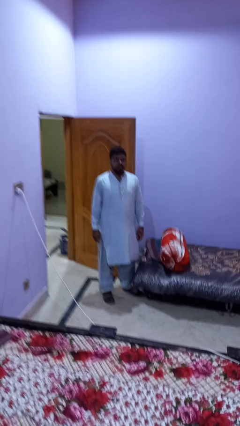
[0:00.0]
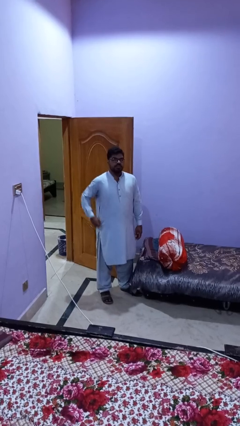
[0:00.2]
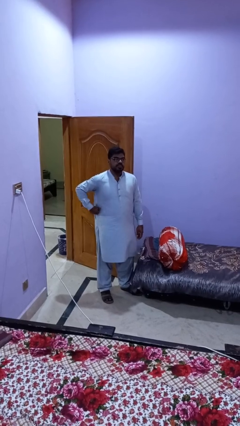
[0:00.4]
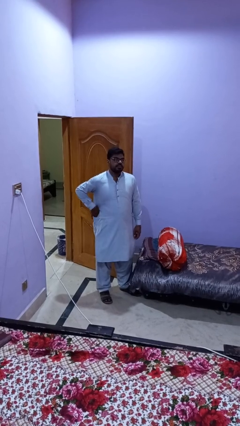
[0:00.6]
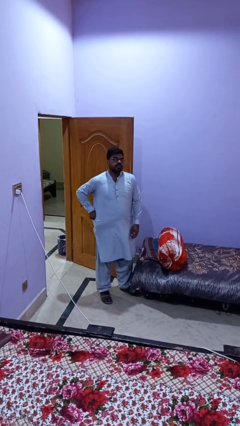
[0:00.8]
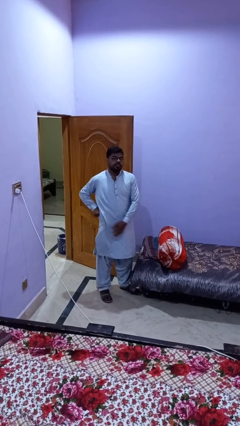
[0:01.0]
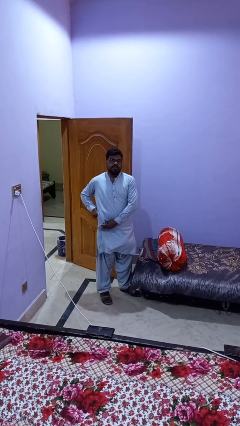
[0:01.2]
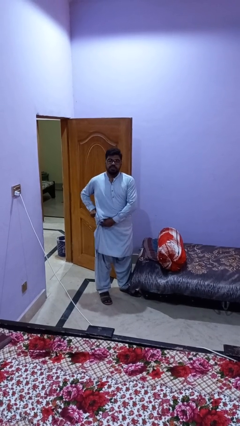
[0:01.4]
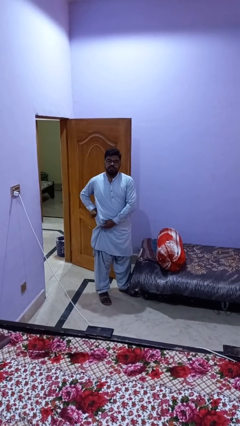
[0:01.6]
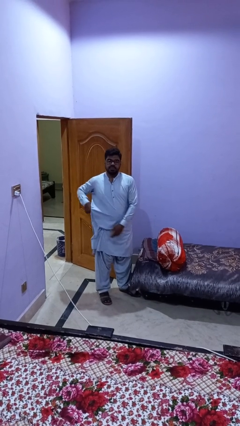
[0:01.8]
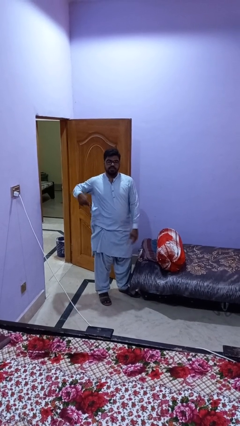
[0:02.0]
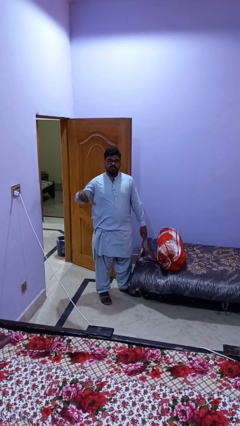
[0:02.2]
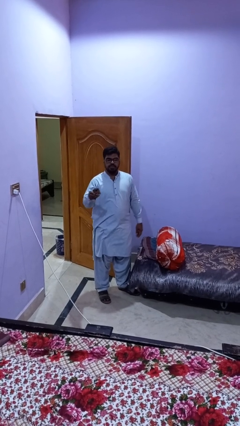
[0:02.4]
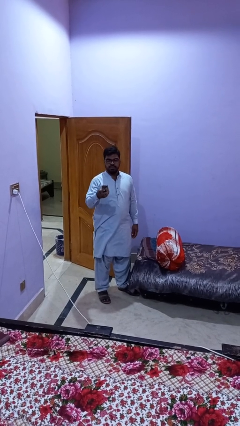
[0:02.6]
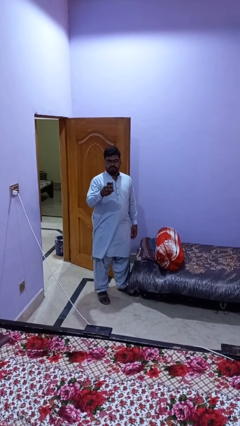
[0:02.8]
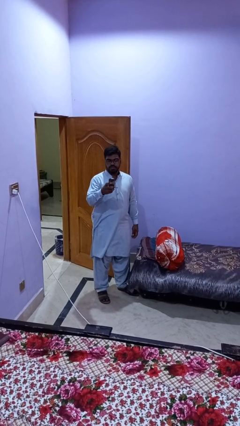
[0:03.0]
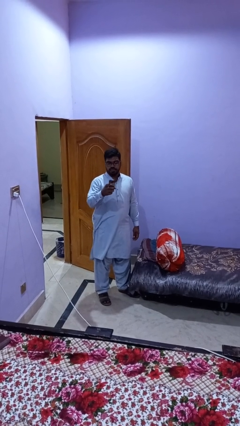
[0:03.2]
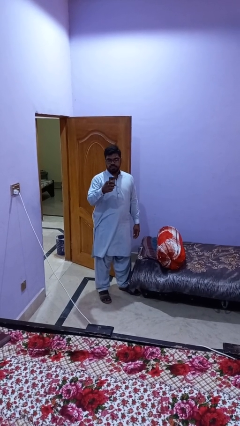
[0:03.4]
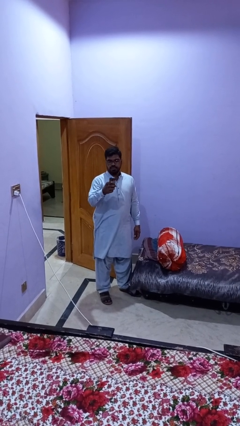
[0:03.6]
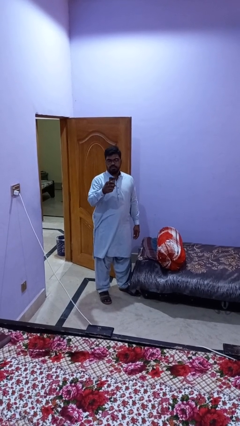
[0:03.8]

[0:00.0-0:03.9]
person takes phone from pocket

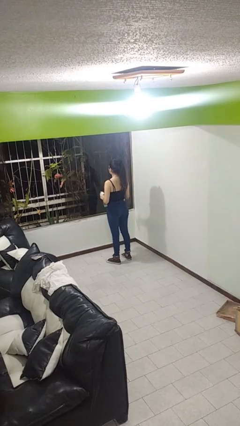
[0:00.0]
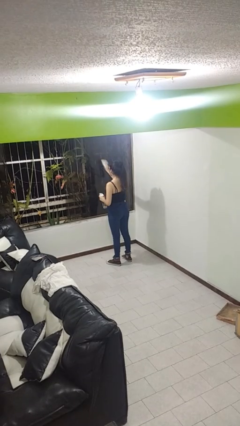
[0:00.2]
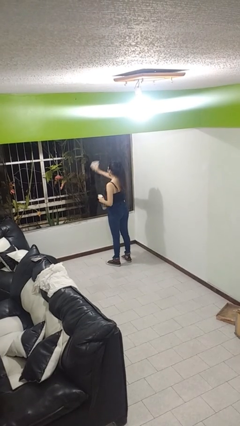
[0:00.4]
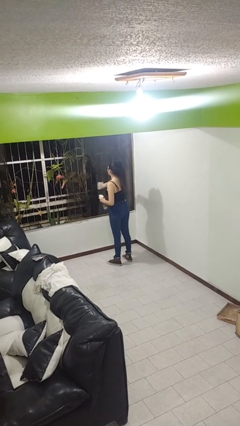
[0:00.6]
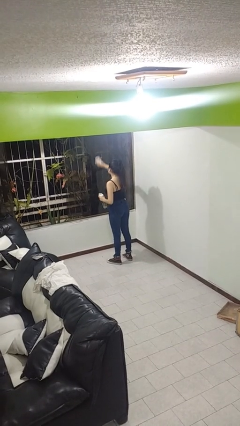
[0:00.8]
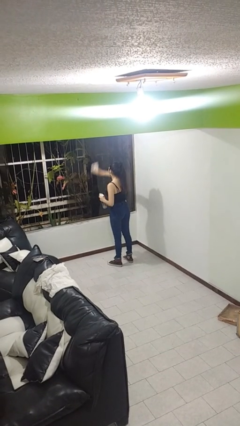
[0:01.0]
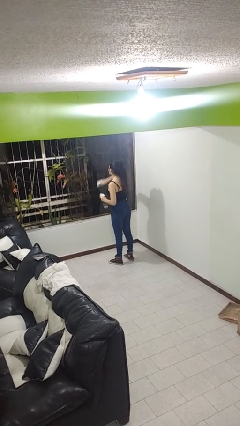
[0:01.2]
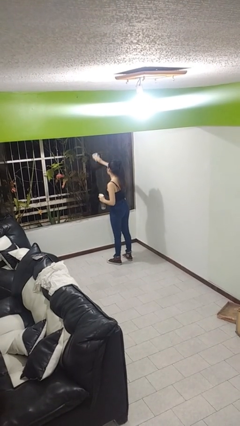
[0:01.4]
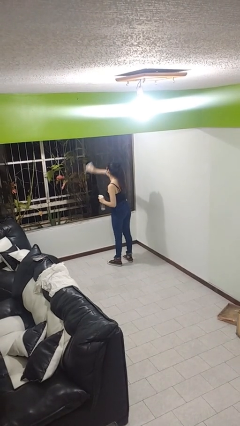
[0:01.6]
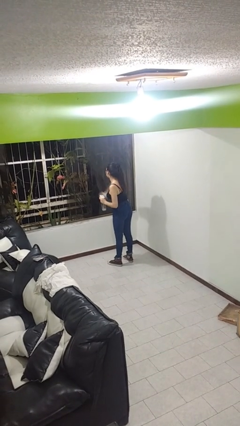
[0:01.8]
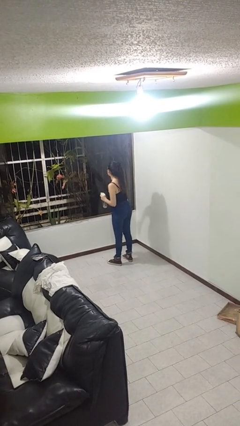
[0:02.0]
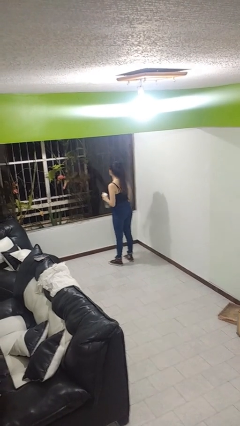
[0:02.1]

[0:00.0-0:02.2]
person washes window

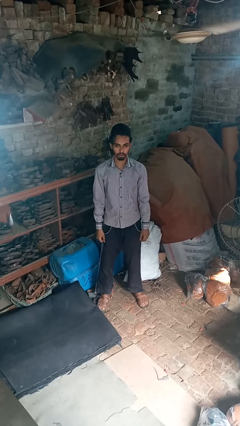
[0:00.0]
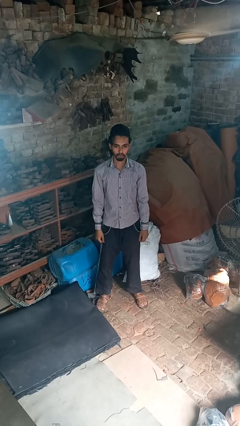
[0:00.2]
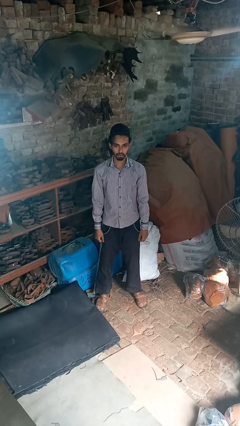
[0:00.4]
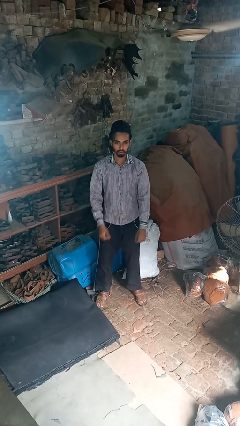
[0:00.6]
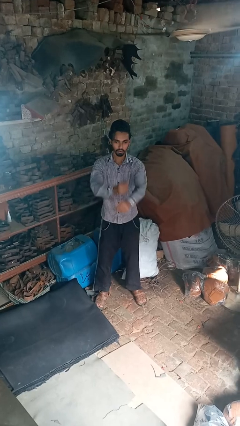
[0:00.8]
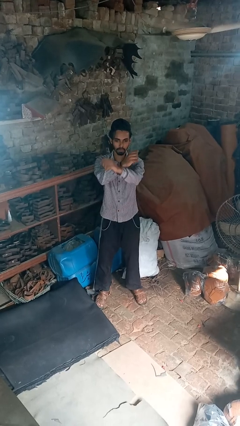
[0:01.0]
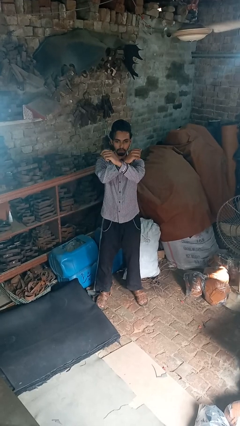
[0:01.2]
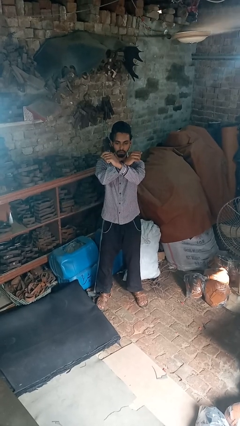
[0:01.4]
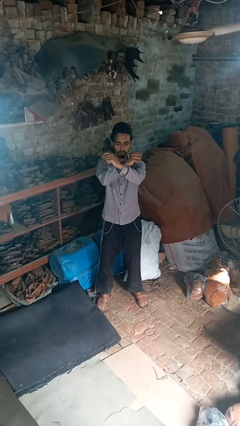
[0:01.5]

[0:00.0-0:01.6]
person crosses arms

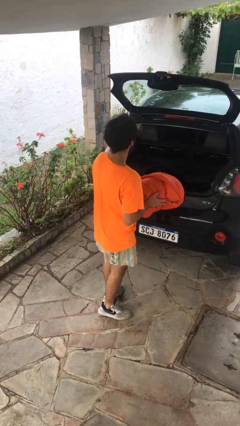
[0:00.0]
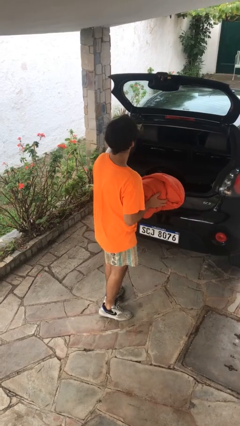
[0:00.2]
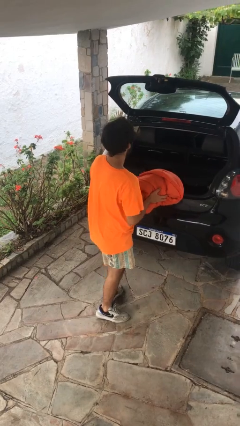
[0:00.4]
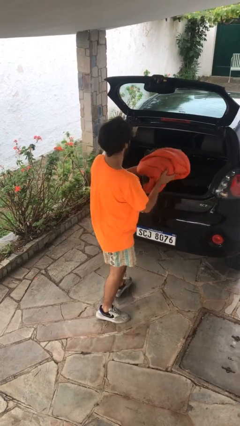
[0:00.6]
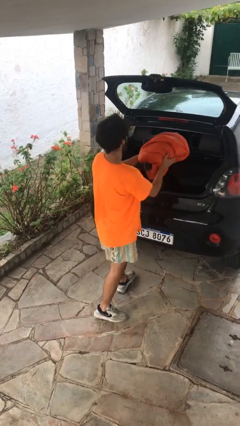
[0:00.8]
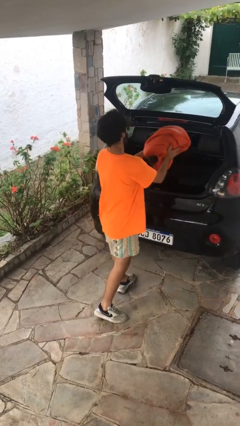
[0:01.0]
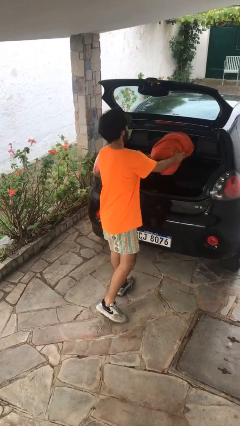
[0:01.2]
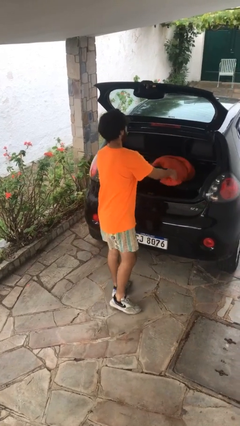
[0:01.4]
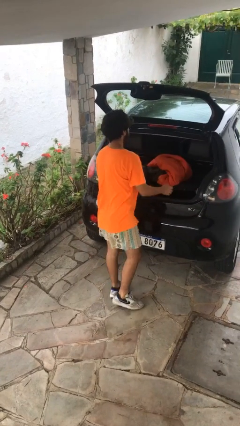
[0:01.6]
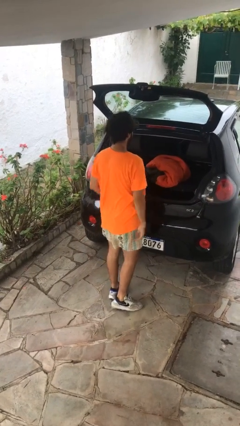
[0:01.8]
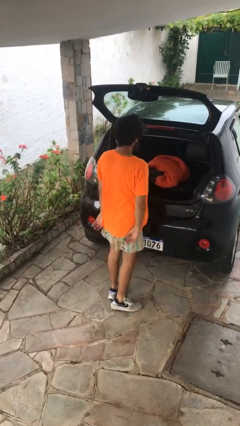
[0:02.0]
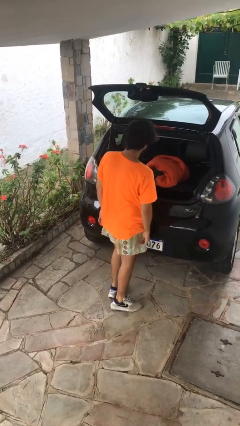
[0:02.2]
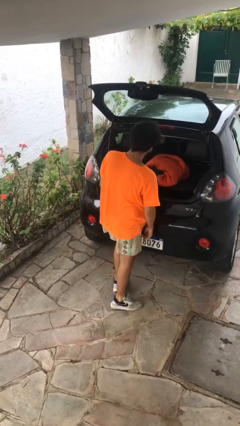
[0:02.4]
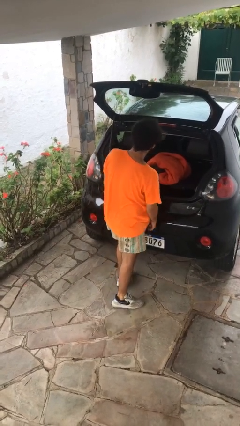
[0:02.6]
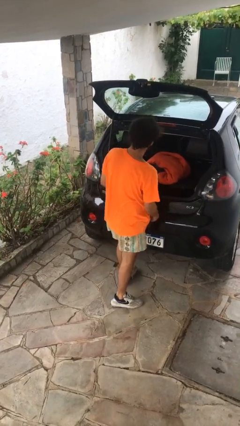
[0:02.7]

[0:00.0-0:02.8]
person loads car

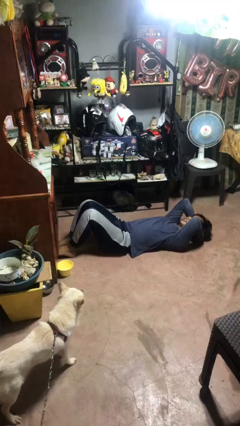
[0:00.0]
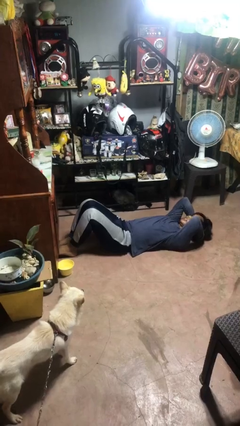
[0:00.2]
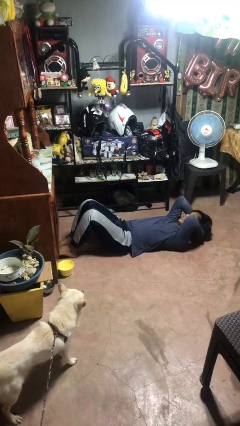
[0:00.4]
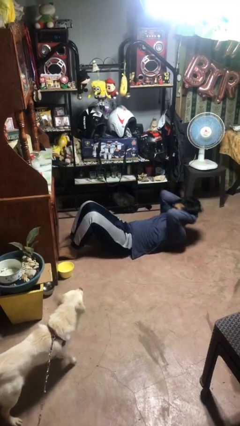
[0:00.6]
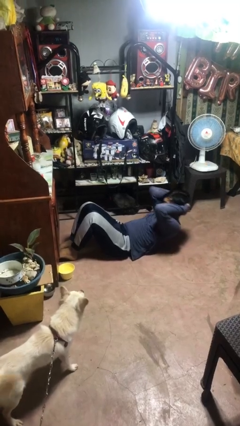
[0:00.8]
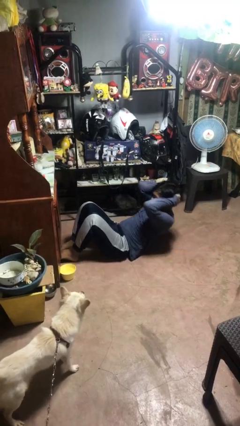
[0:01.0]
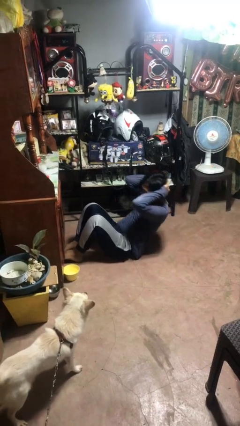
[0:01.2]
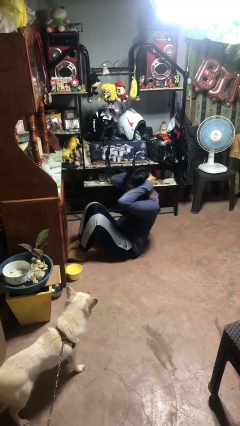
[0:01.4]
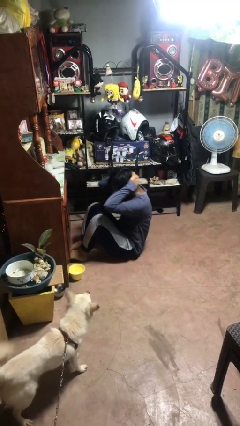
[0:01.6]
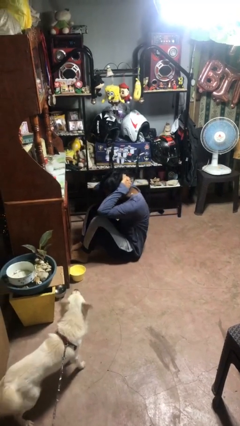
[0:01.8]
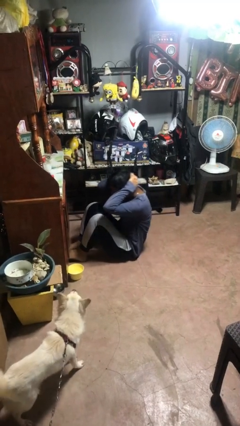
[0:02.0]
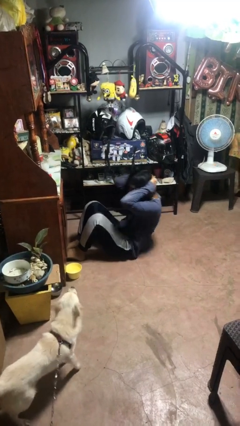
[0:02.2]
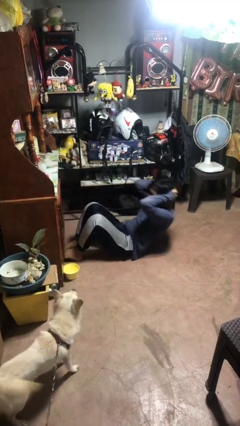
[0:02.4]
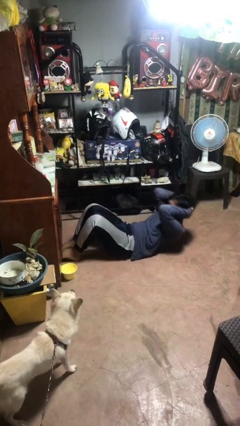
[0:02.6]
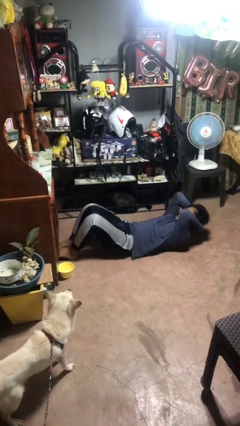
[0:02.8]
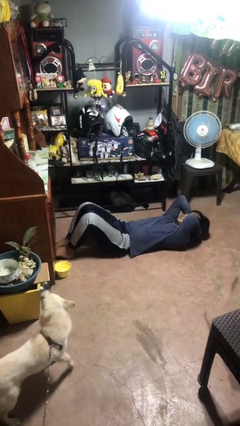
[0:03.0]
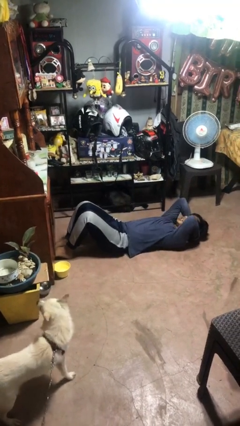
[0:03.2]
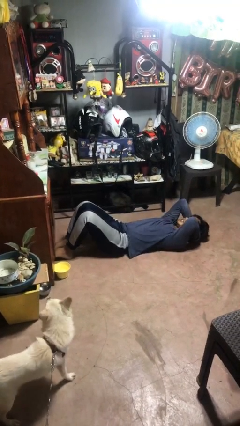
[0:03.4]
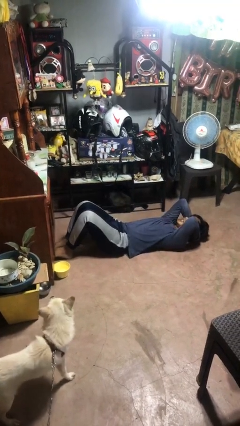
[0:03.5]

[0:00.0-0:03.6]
person exercises with situp

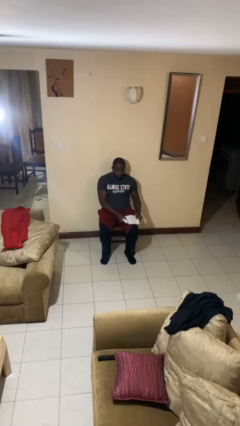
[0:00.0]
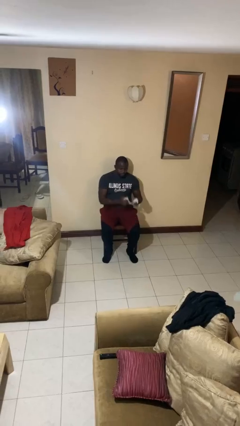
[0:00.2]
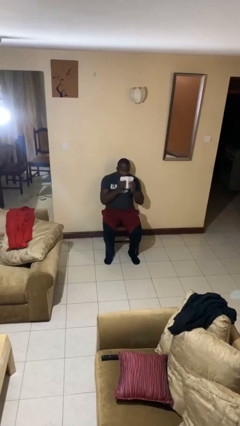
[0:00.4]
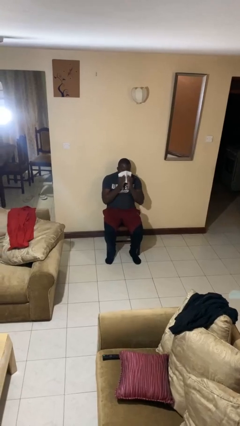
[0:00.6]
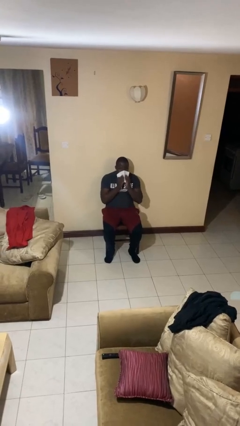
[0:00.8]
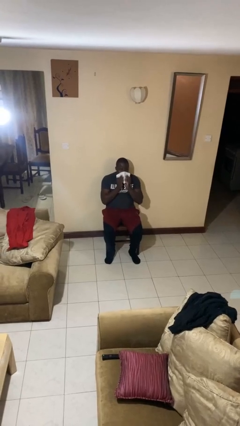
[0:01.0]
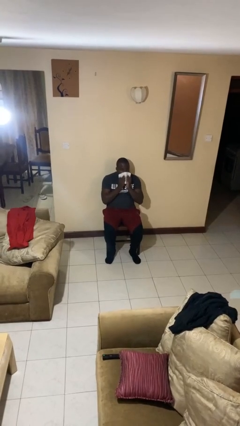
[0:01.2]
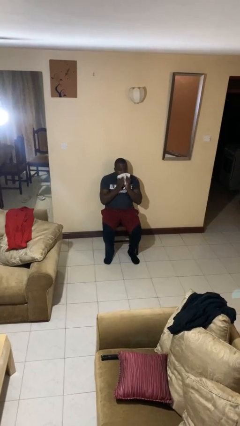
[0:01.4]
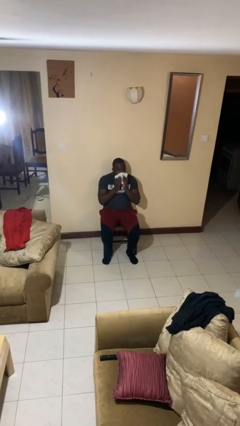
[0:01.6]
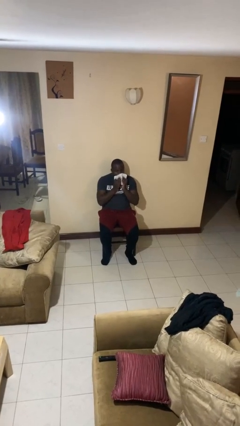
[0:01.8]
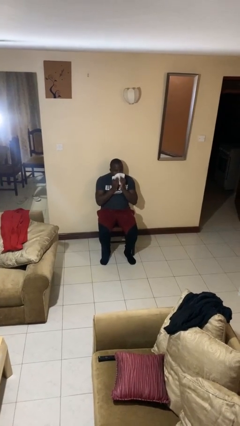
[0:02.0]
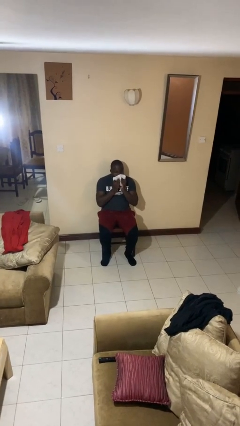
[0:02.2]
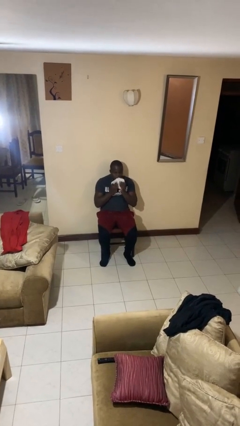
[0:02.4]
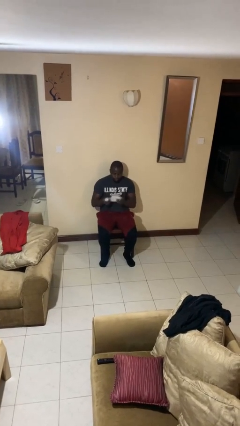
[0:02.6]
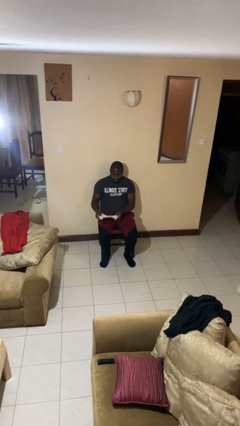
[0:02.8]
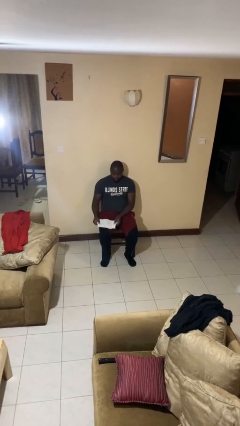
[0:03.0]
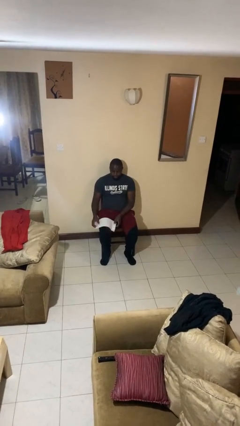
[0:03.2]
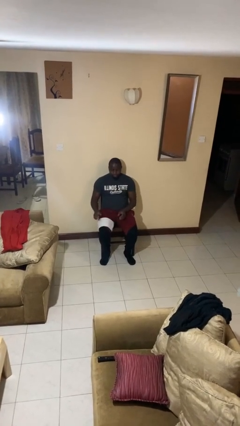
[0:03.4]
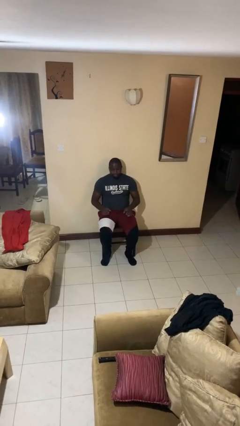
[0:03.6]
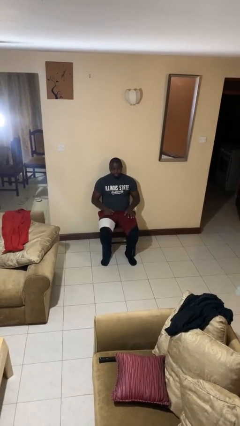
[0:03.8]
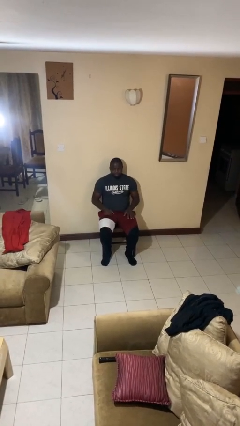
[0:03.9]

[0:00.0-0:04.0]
person wipes mouth with napkin
